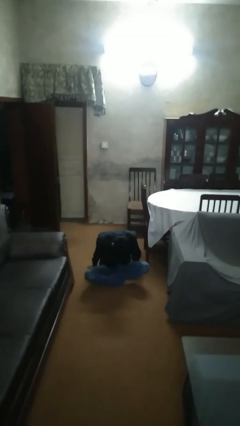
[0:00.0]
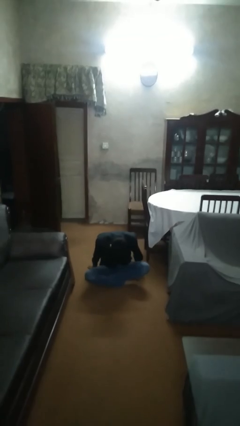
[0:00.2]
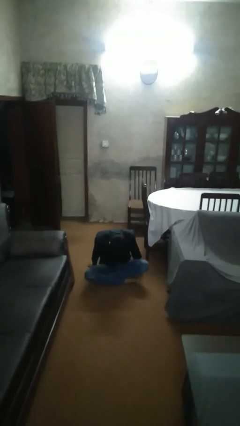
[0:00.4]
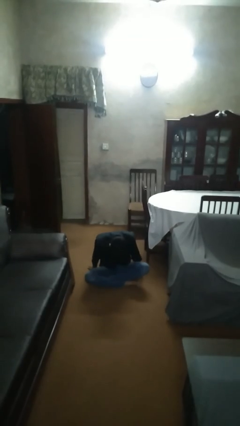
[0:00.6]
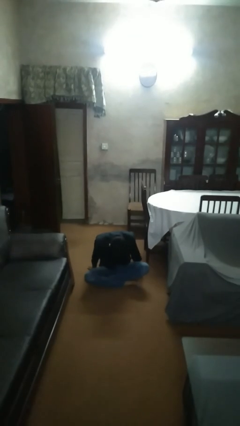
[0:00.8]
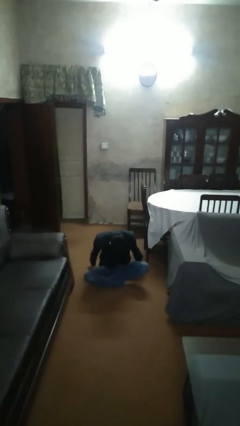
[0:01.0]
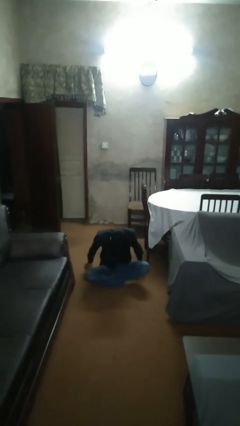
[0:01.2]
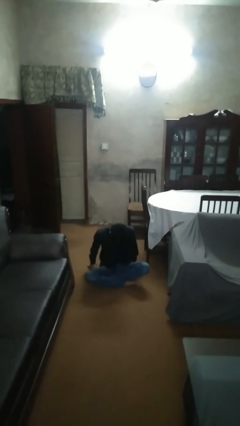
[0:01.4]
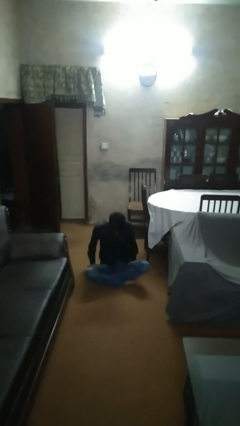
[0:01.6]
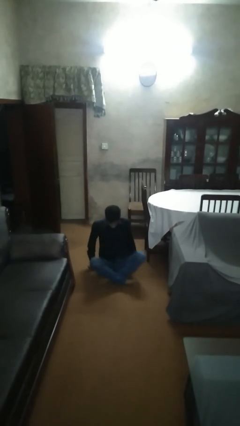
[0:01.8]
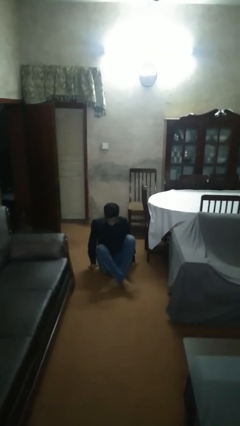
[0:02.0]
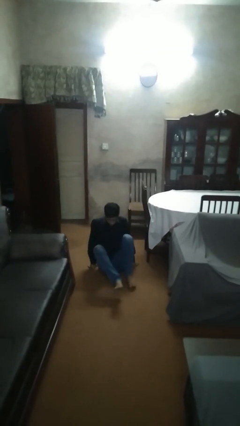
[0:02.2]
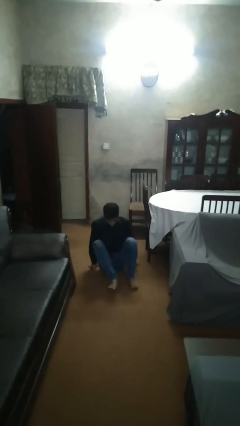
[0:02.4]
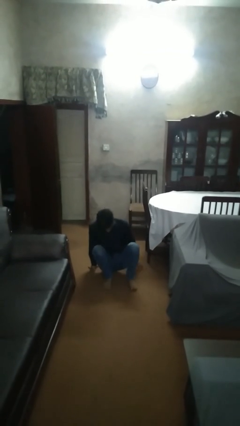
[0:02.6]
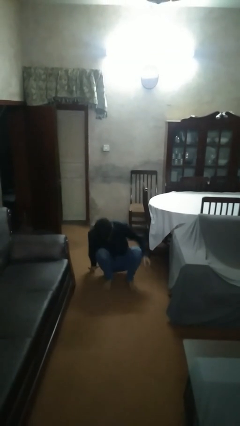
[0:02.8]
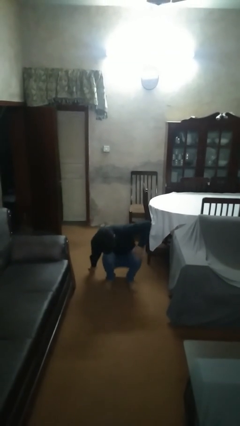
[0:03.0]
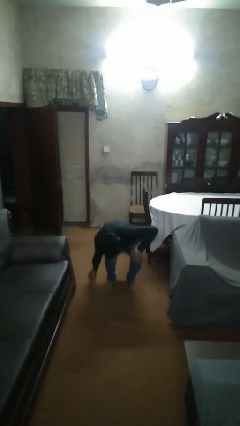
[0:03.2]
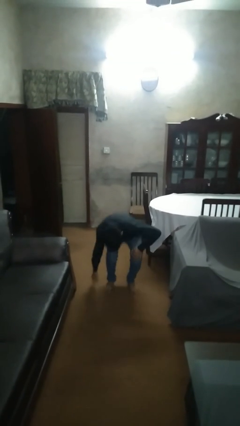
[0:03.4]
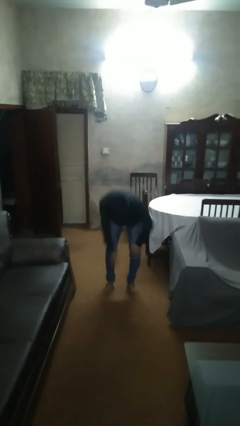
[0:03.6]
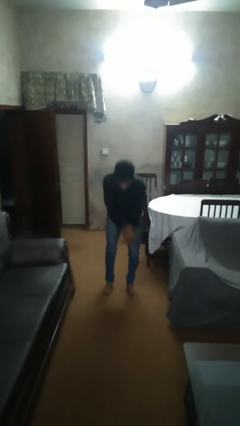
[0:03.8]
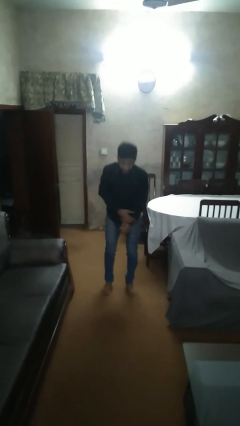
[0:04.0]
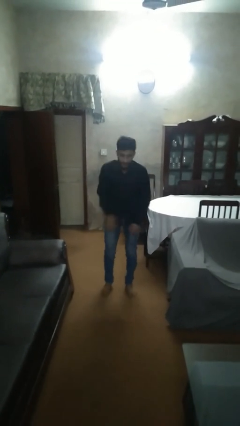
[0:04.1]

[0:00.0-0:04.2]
person stands up from floor

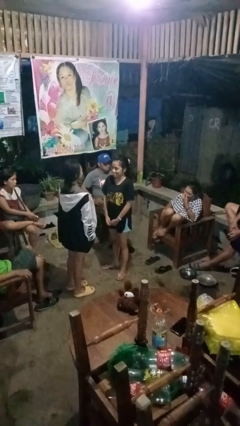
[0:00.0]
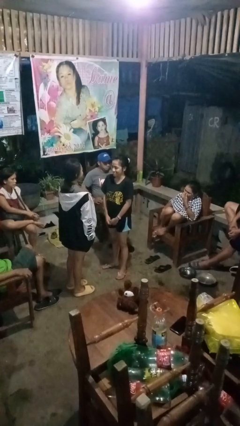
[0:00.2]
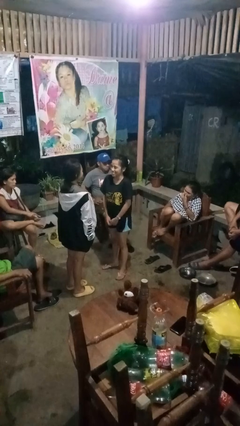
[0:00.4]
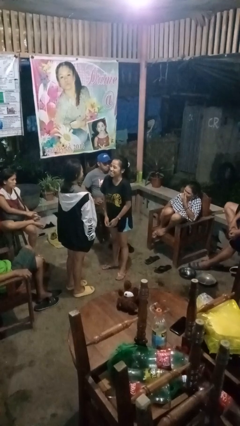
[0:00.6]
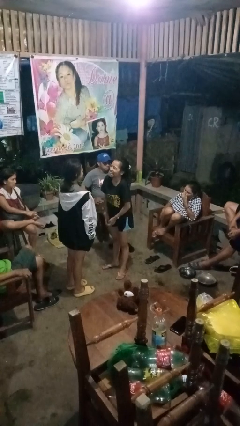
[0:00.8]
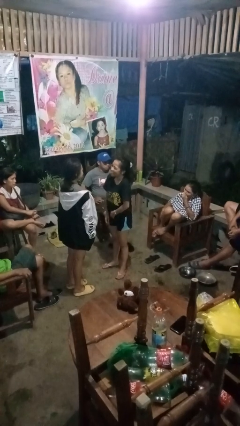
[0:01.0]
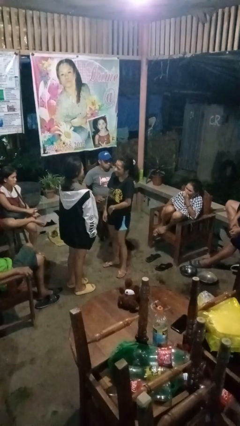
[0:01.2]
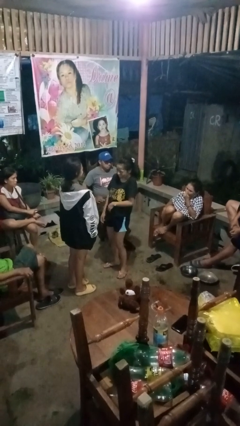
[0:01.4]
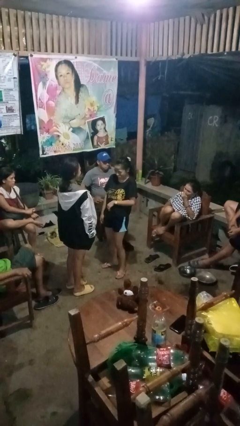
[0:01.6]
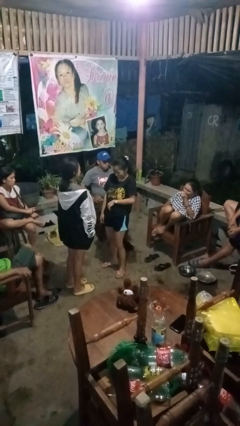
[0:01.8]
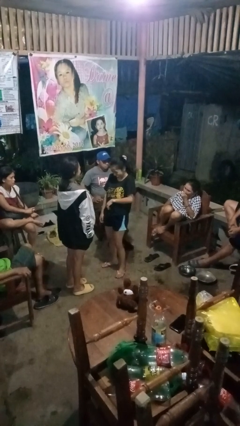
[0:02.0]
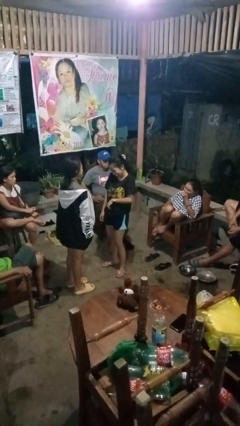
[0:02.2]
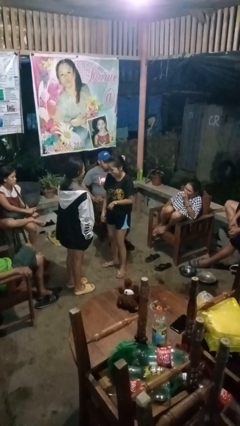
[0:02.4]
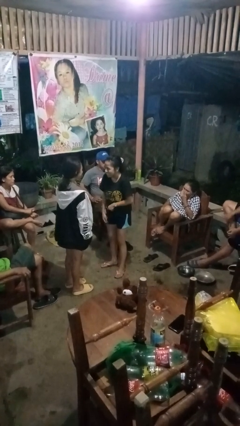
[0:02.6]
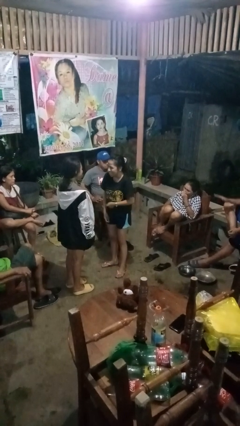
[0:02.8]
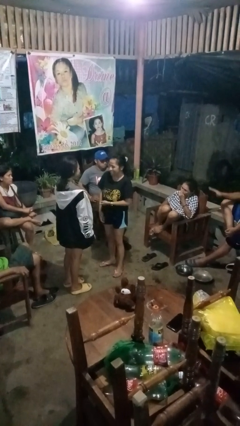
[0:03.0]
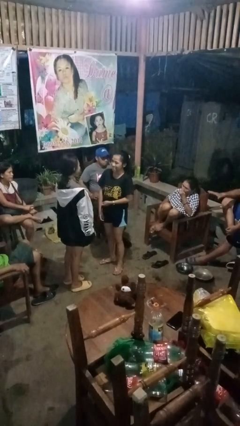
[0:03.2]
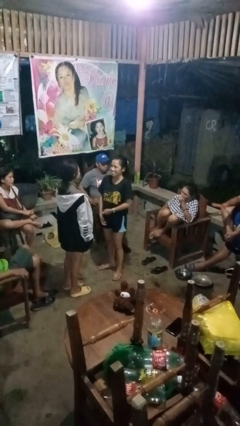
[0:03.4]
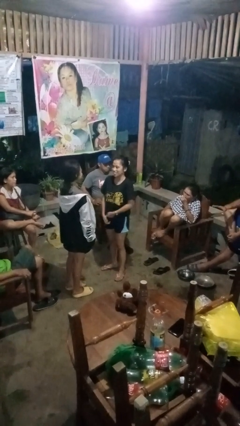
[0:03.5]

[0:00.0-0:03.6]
person laughs with person

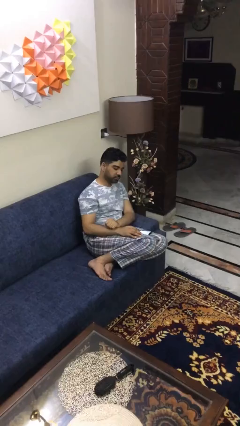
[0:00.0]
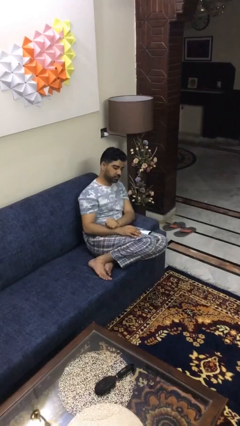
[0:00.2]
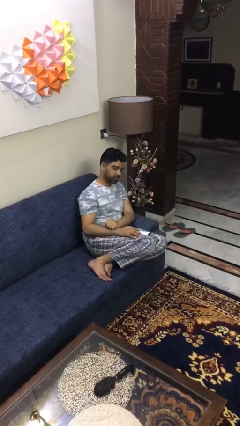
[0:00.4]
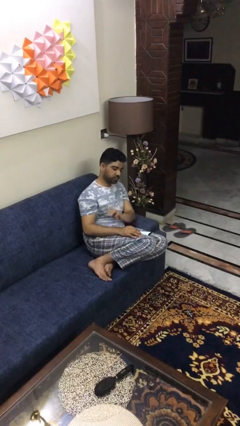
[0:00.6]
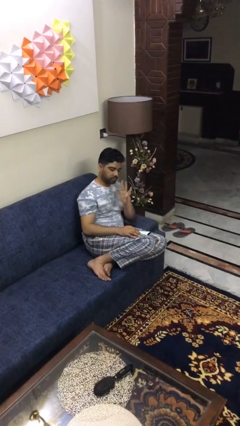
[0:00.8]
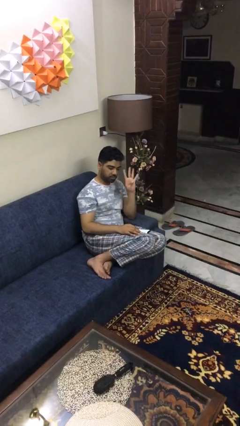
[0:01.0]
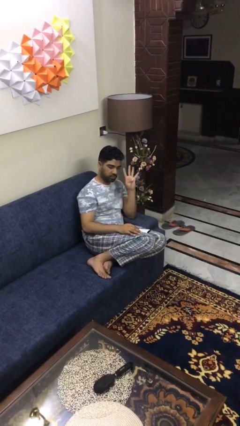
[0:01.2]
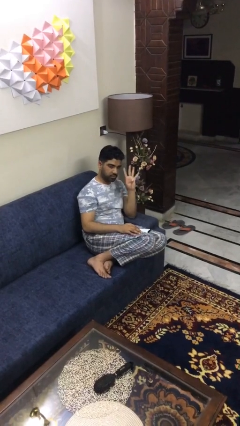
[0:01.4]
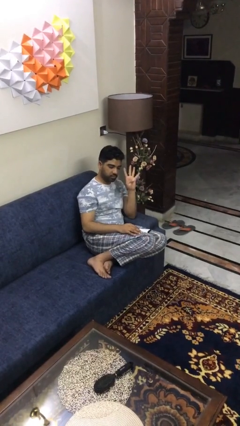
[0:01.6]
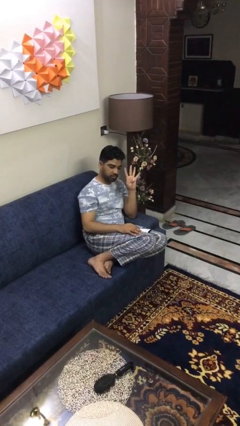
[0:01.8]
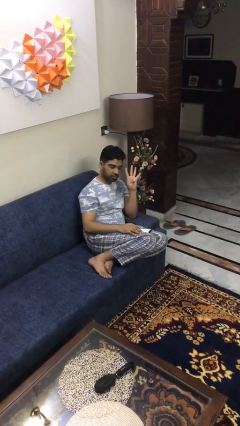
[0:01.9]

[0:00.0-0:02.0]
person gestures number four

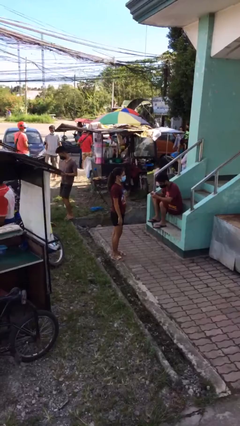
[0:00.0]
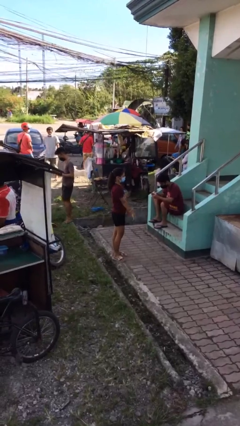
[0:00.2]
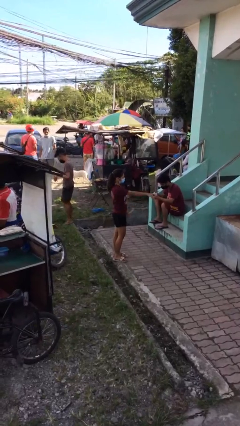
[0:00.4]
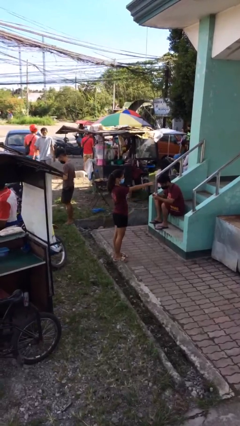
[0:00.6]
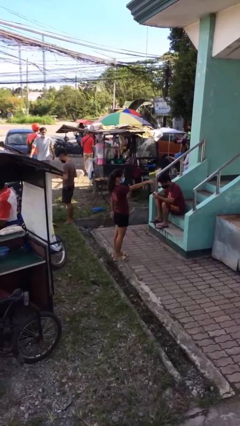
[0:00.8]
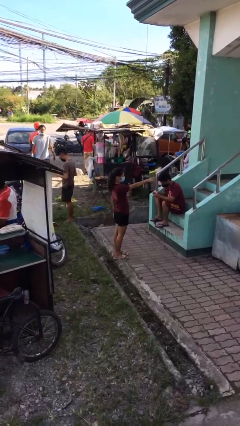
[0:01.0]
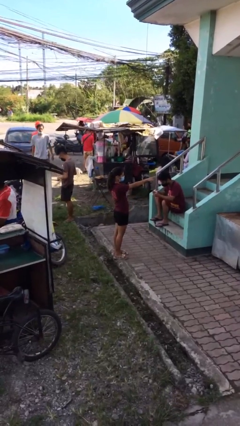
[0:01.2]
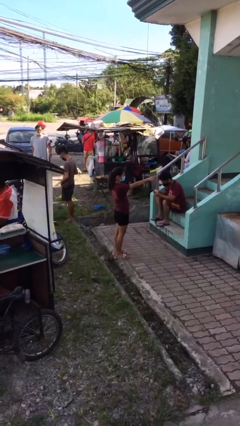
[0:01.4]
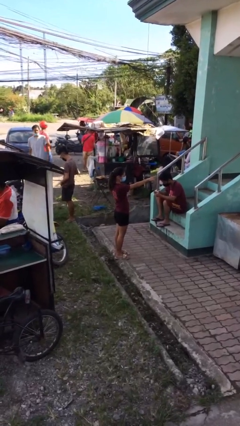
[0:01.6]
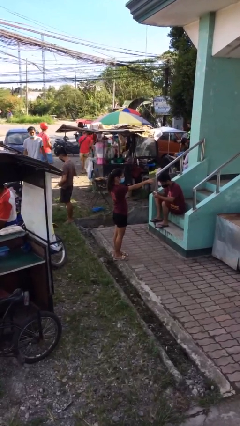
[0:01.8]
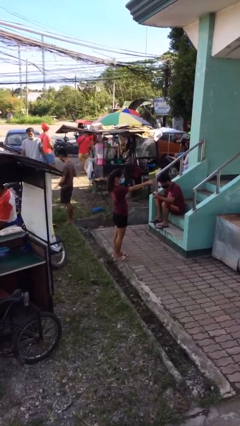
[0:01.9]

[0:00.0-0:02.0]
person points at person

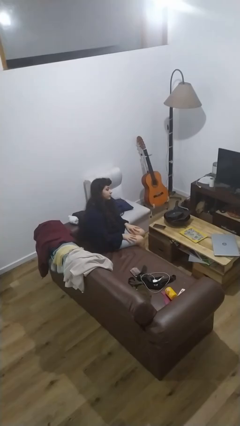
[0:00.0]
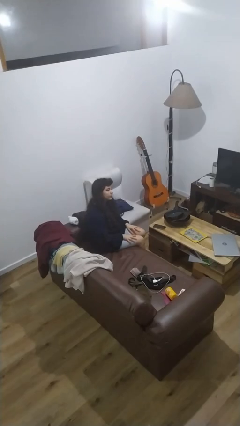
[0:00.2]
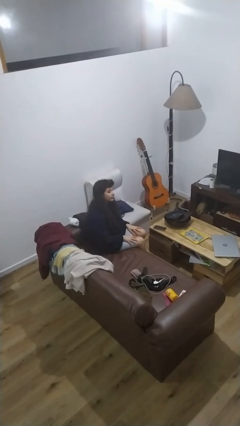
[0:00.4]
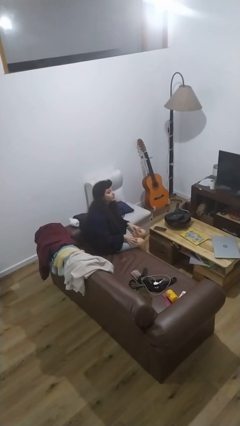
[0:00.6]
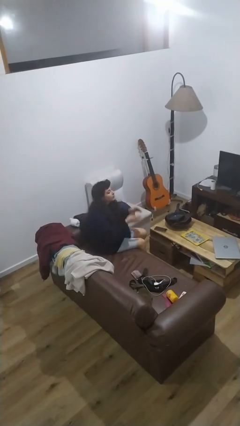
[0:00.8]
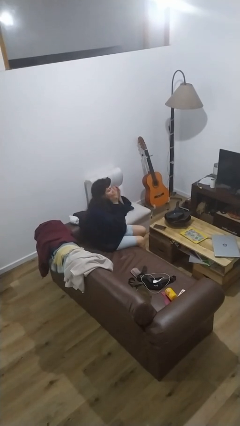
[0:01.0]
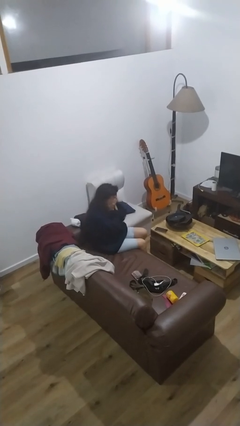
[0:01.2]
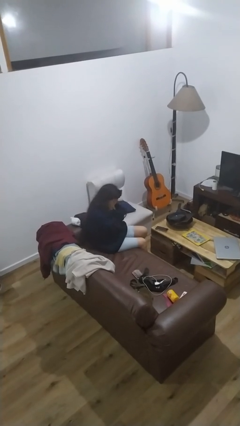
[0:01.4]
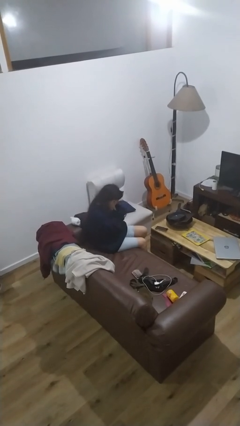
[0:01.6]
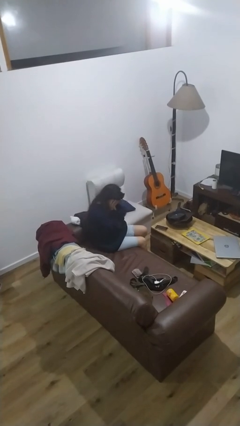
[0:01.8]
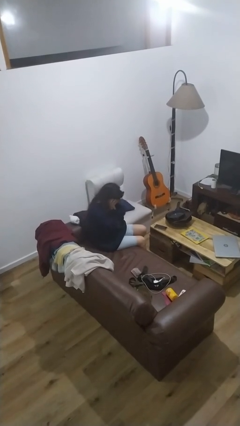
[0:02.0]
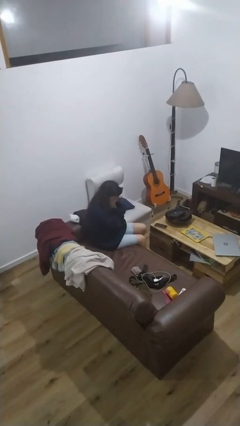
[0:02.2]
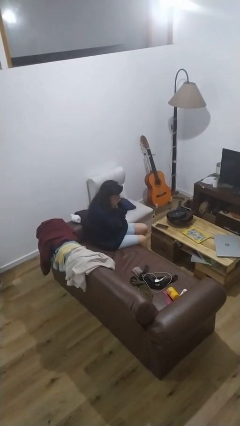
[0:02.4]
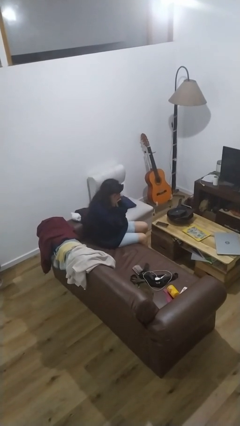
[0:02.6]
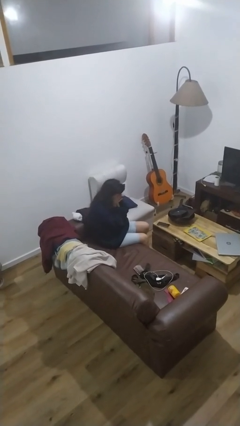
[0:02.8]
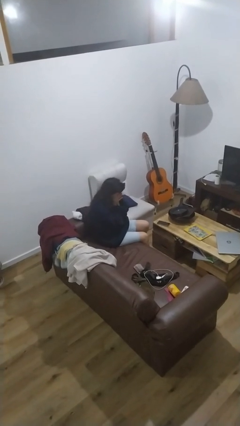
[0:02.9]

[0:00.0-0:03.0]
person covers face with hands

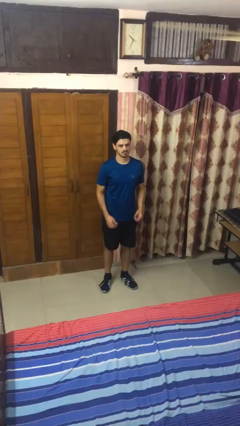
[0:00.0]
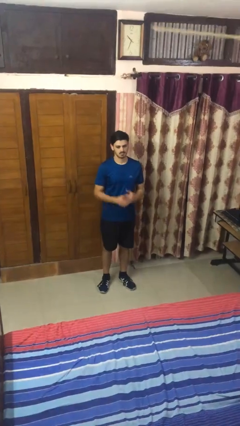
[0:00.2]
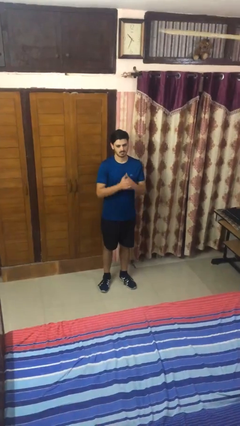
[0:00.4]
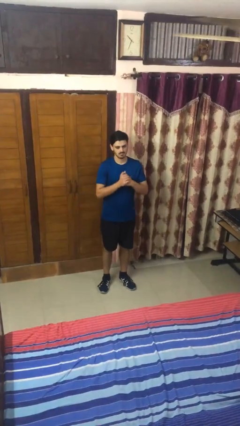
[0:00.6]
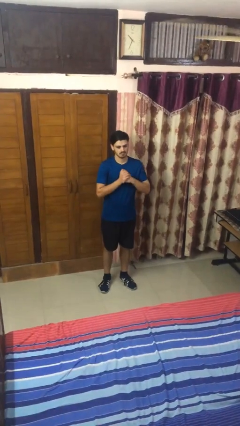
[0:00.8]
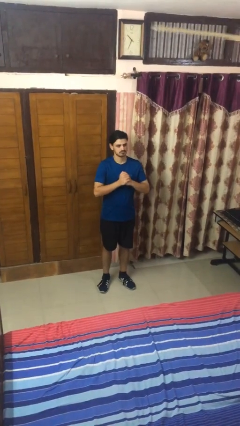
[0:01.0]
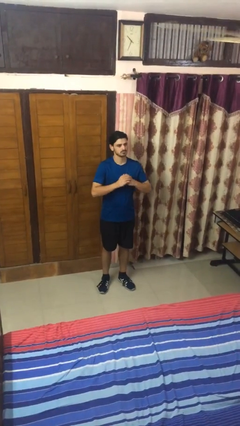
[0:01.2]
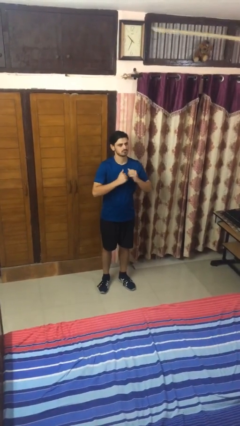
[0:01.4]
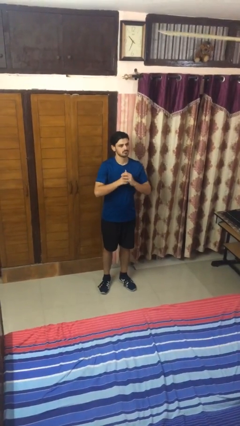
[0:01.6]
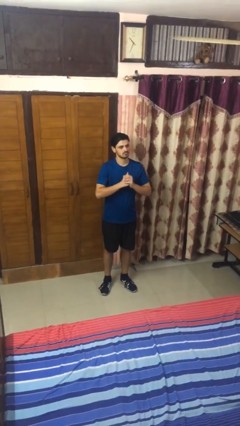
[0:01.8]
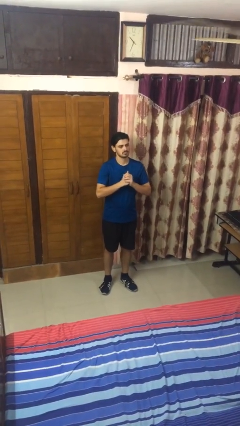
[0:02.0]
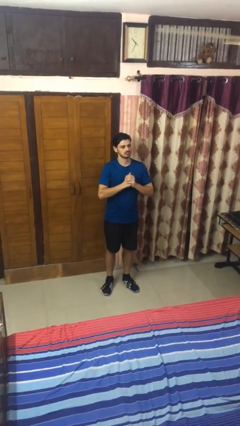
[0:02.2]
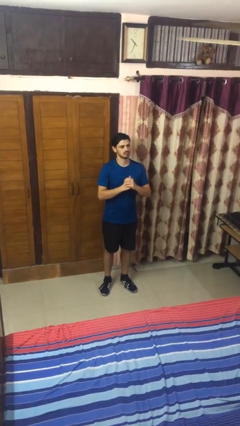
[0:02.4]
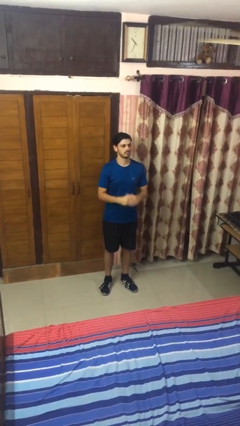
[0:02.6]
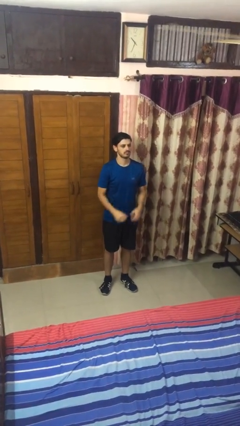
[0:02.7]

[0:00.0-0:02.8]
person cracks knuckles

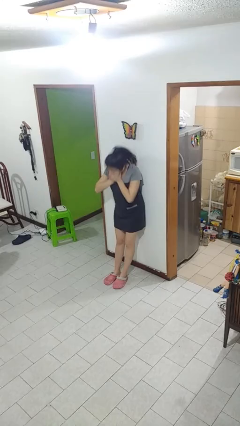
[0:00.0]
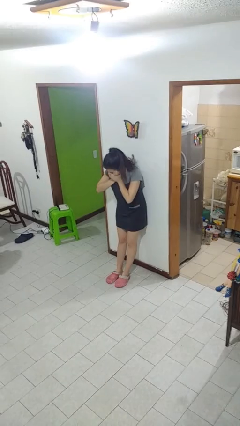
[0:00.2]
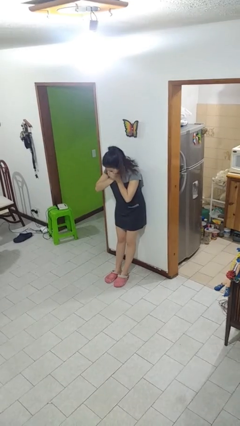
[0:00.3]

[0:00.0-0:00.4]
person sneezes into hand
